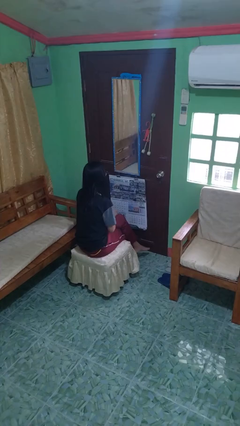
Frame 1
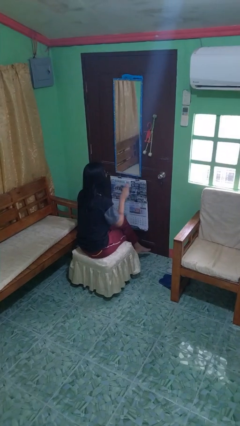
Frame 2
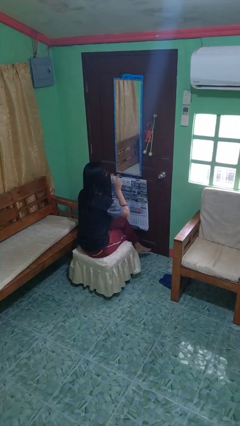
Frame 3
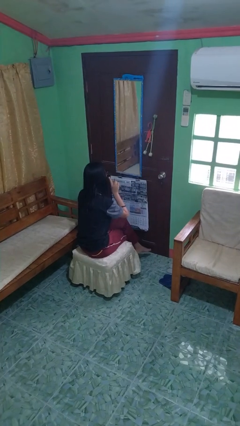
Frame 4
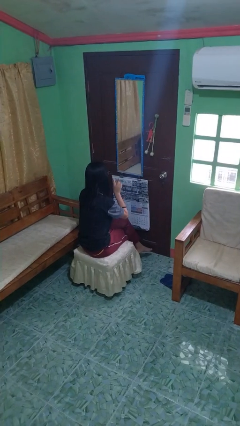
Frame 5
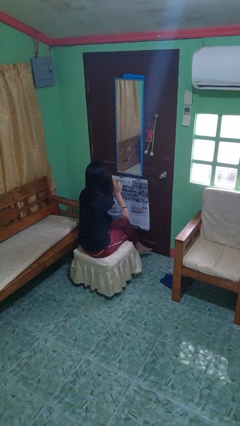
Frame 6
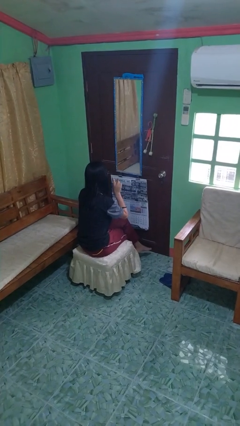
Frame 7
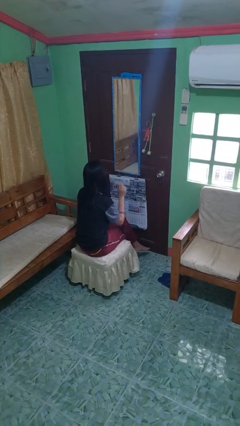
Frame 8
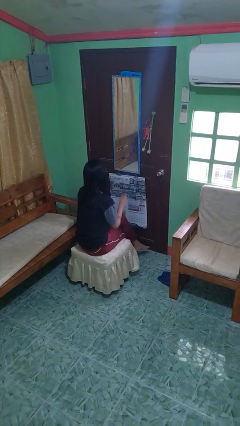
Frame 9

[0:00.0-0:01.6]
person gestures peace

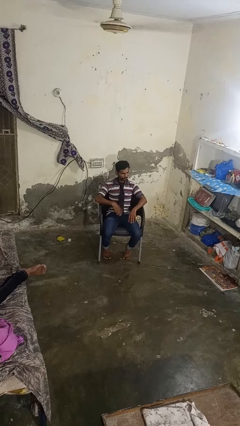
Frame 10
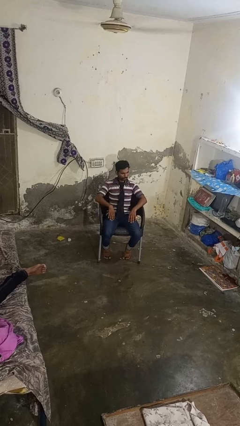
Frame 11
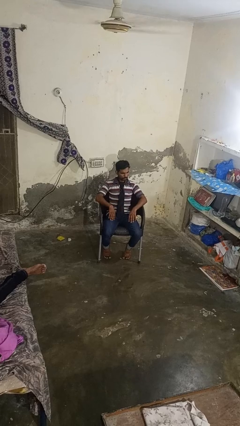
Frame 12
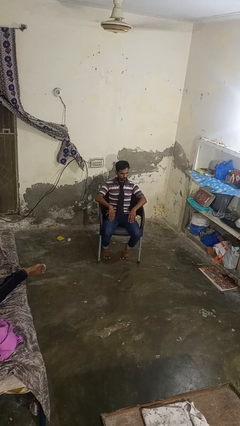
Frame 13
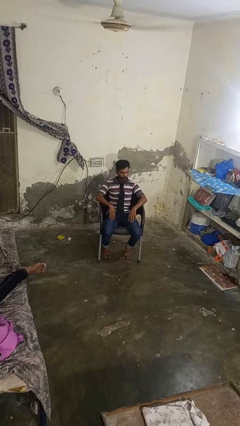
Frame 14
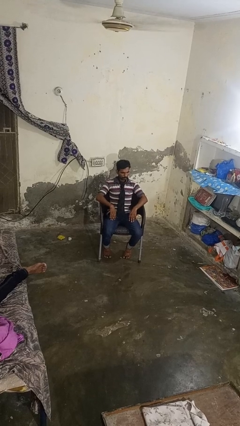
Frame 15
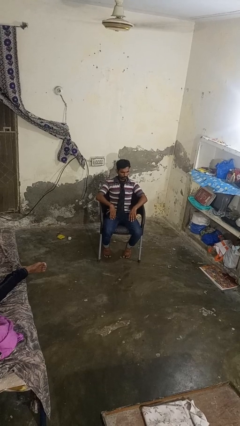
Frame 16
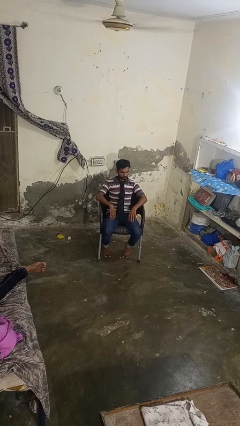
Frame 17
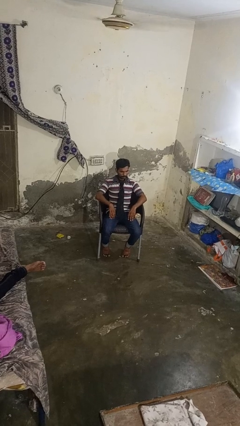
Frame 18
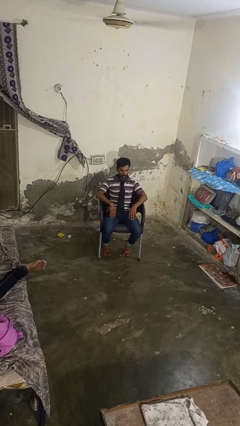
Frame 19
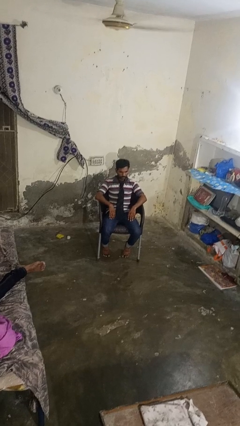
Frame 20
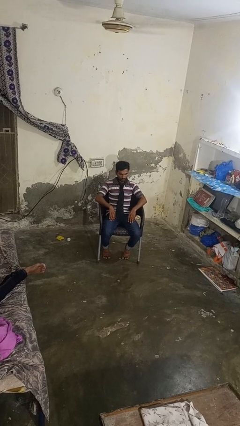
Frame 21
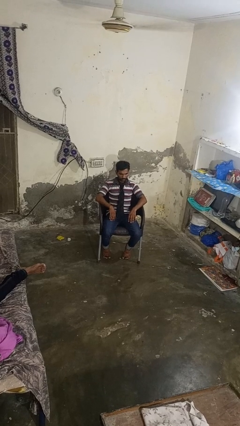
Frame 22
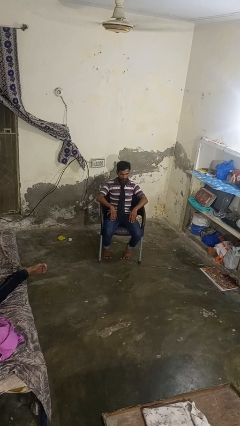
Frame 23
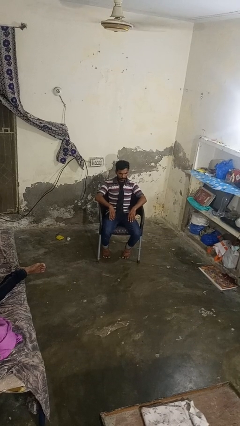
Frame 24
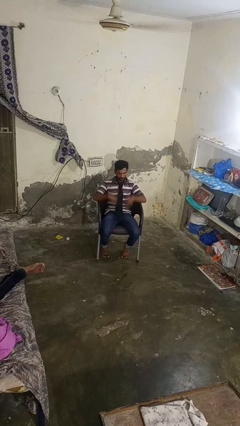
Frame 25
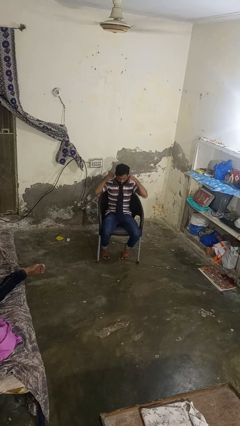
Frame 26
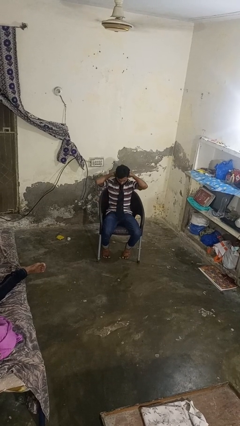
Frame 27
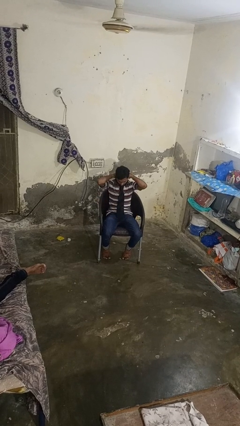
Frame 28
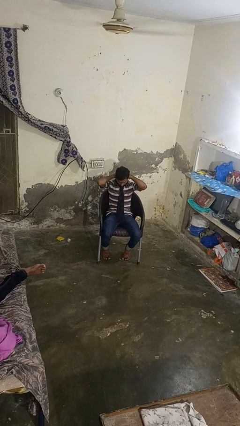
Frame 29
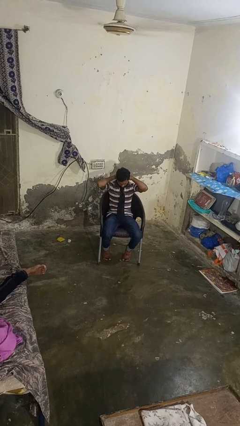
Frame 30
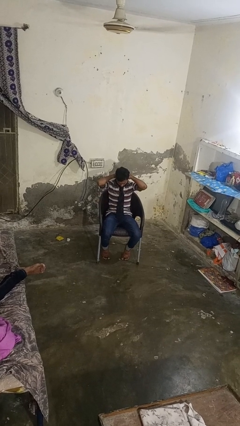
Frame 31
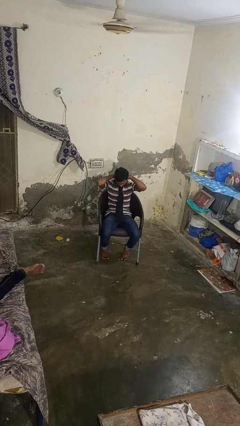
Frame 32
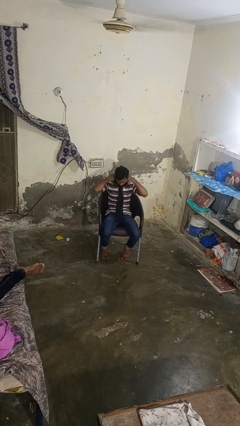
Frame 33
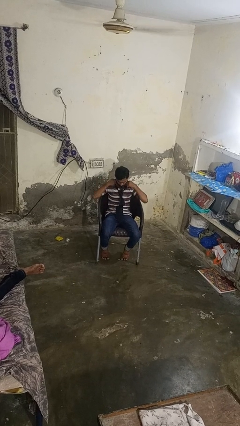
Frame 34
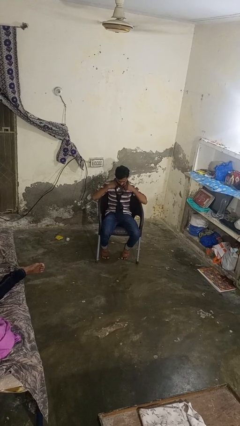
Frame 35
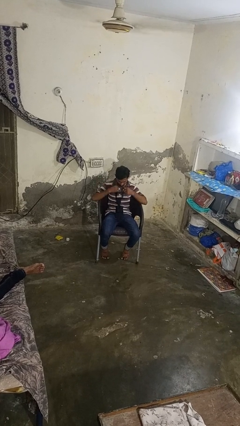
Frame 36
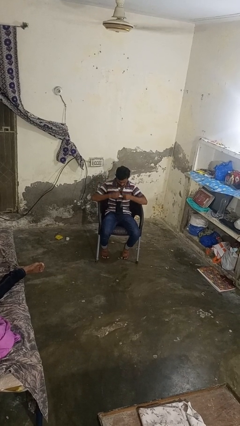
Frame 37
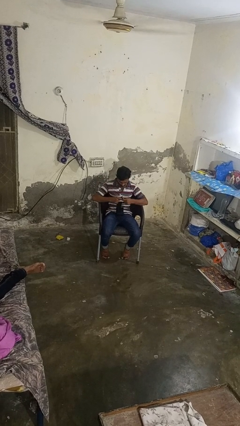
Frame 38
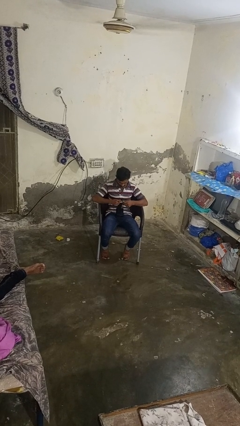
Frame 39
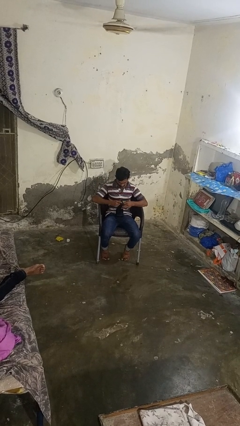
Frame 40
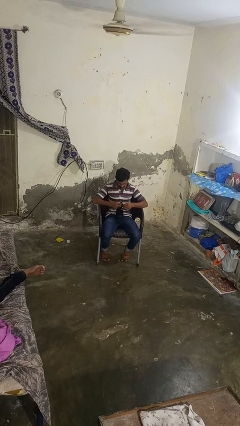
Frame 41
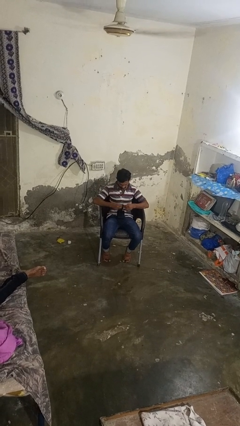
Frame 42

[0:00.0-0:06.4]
person takes off necktie

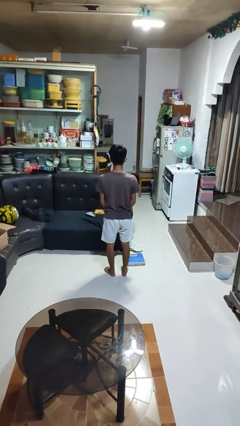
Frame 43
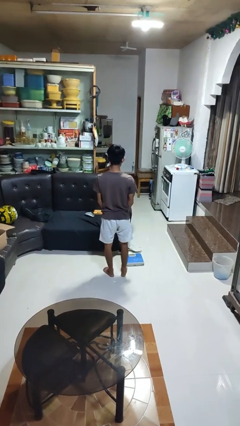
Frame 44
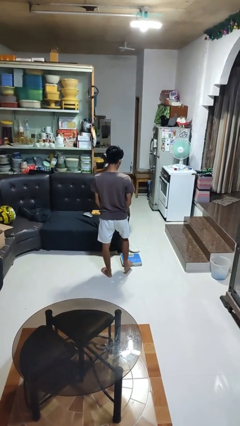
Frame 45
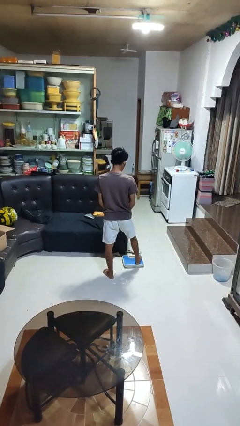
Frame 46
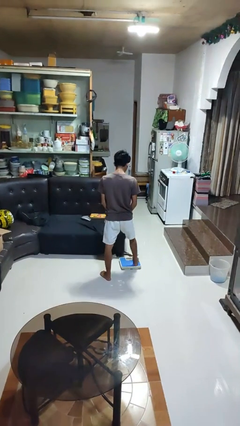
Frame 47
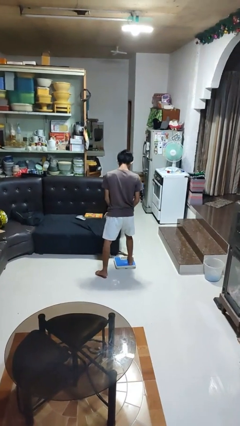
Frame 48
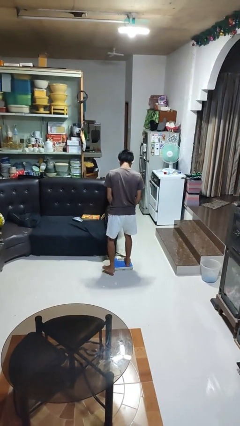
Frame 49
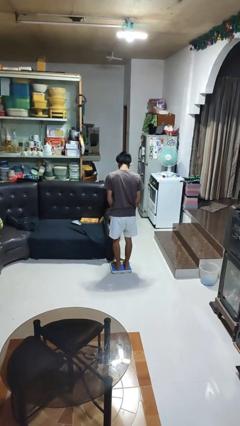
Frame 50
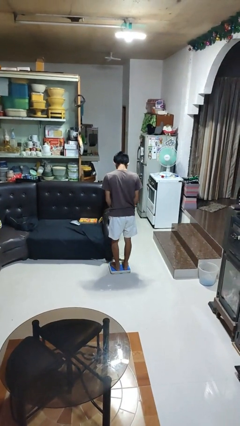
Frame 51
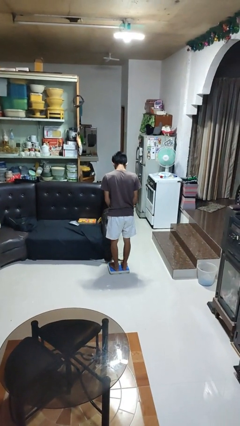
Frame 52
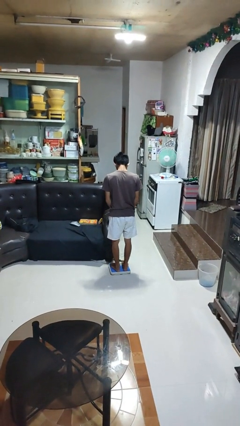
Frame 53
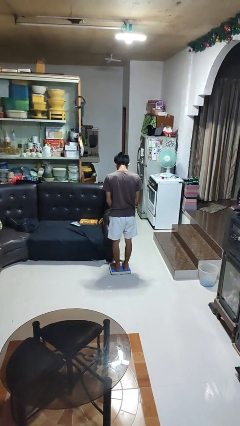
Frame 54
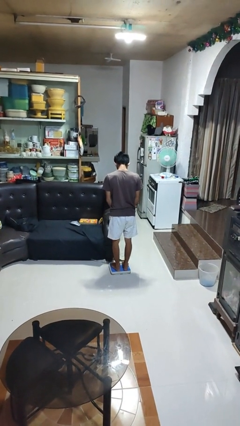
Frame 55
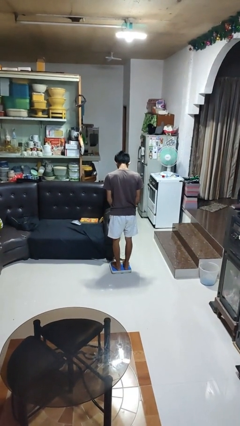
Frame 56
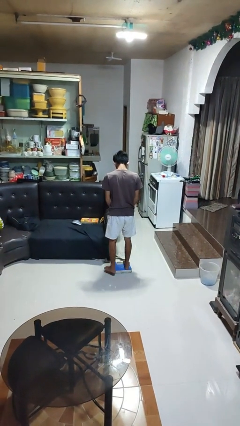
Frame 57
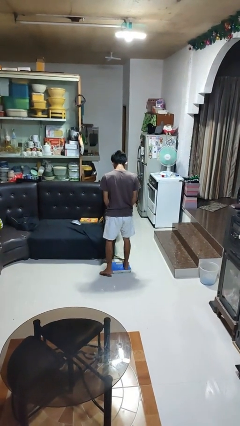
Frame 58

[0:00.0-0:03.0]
person uses bodyweight scale

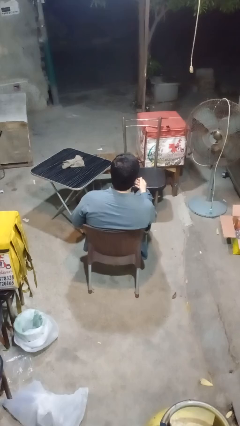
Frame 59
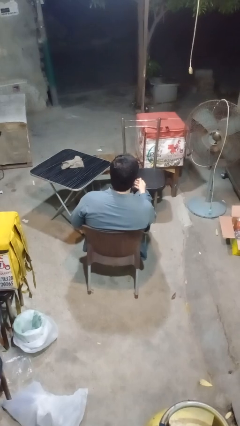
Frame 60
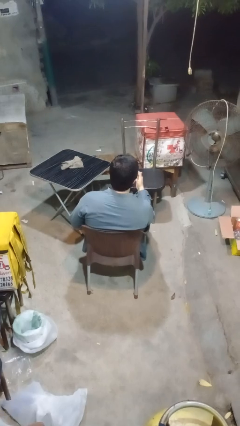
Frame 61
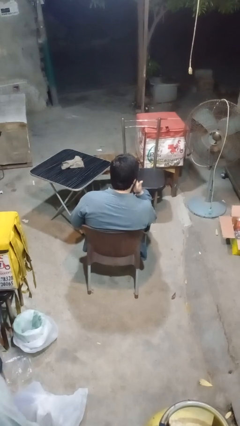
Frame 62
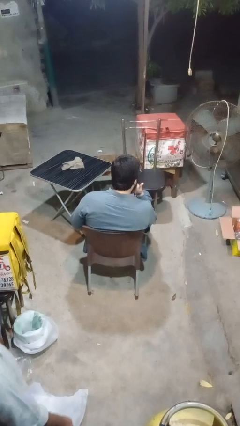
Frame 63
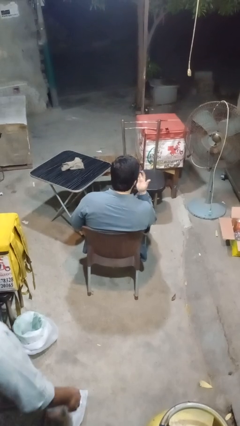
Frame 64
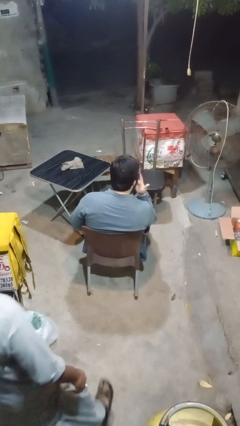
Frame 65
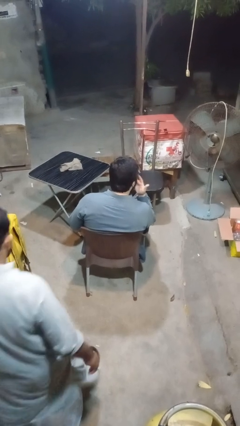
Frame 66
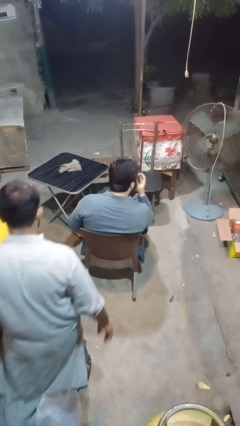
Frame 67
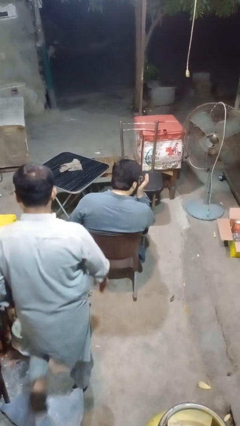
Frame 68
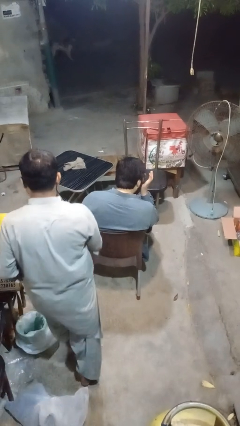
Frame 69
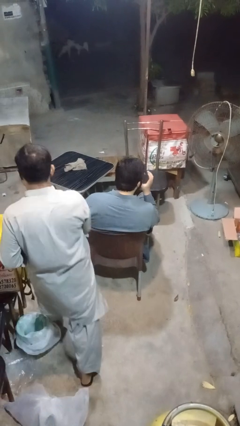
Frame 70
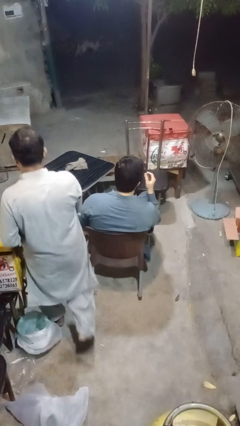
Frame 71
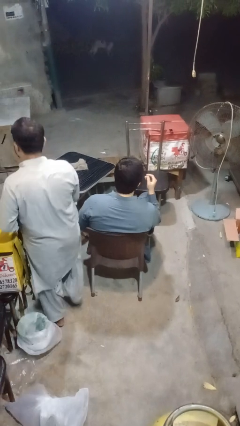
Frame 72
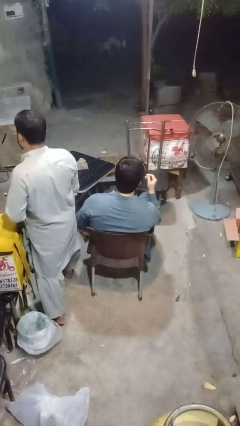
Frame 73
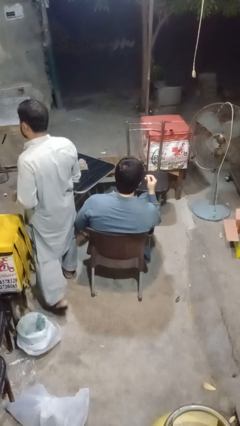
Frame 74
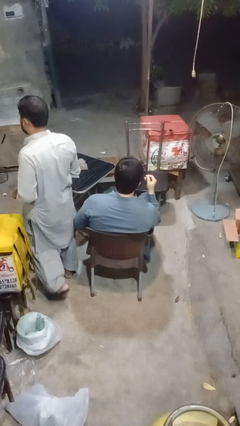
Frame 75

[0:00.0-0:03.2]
person licks fingers

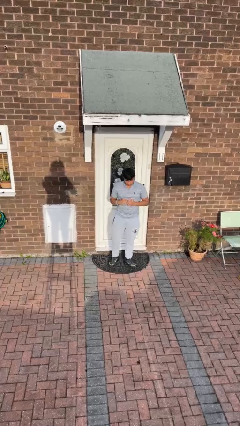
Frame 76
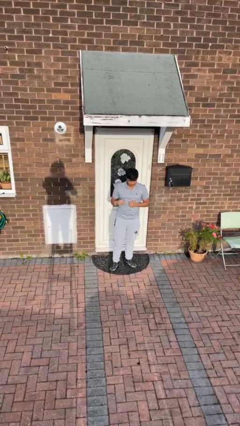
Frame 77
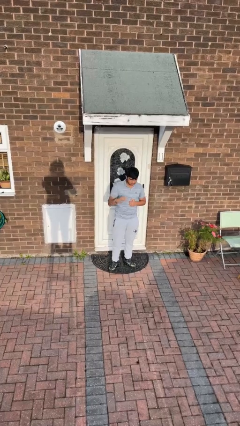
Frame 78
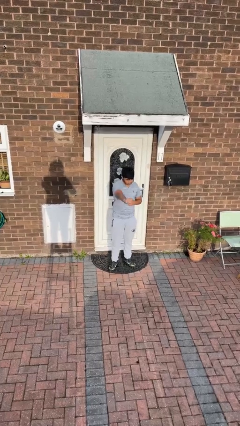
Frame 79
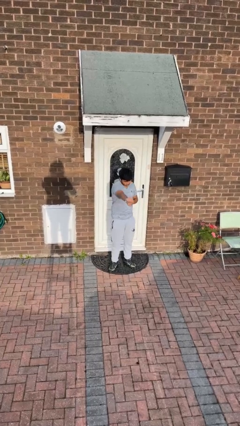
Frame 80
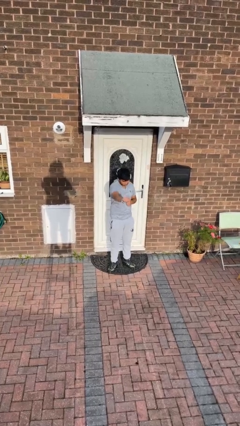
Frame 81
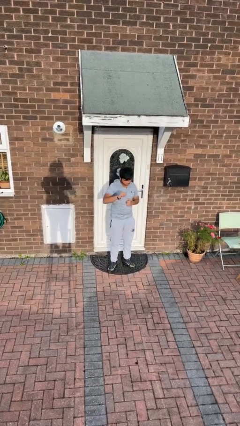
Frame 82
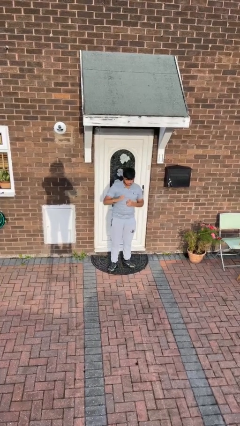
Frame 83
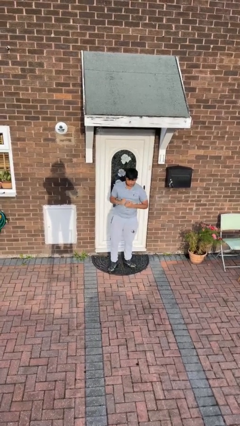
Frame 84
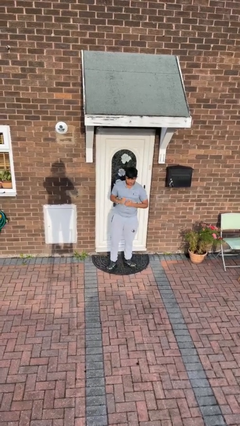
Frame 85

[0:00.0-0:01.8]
person punches

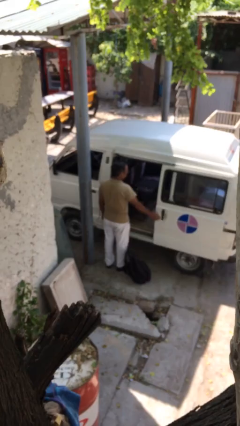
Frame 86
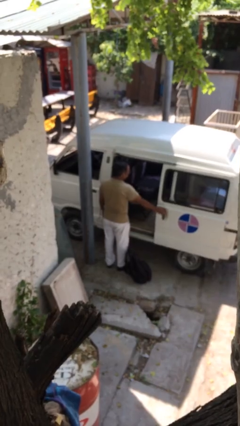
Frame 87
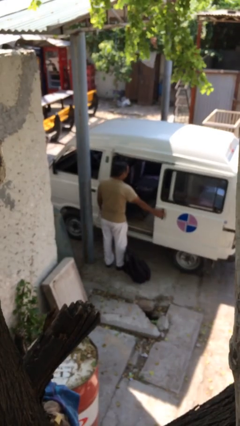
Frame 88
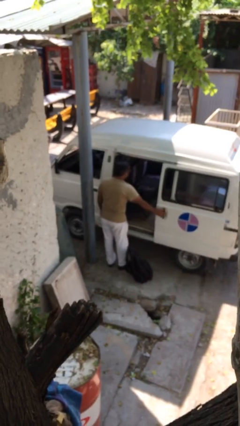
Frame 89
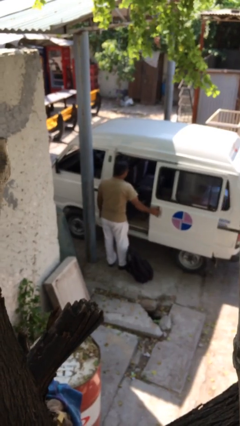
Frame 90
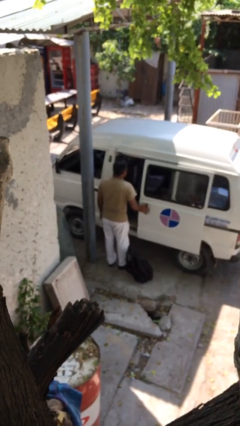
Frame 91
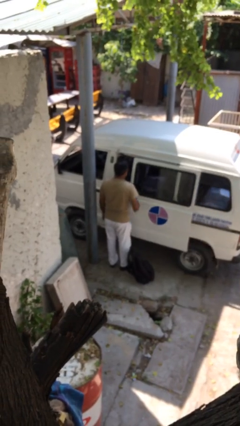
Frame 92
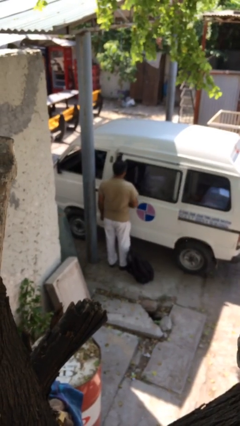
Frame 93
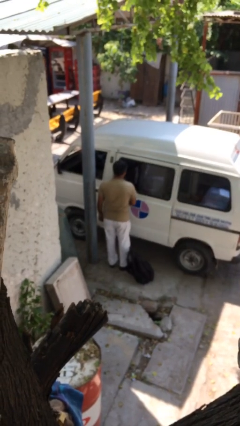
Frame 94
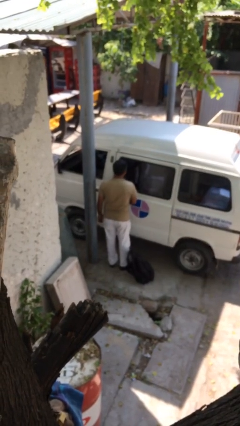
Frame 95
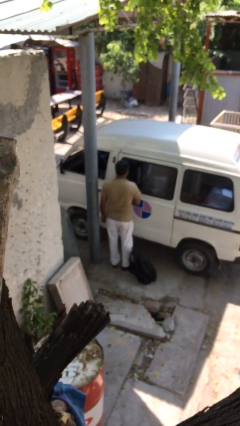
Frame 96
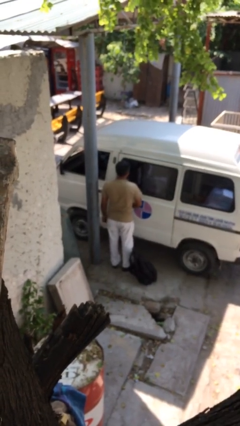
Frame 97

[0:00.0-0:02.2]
person closes car door
